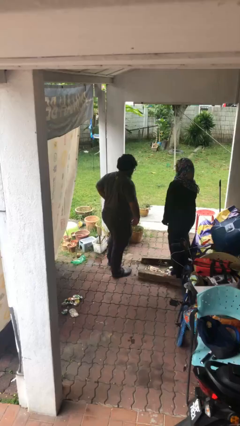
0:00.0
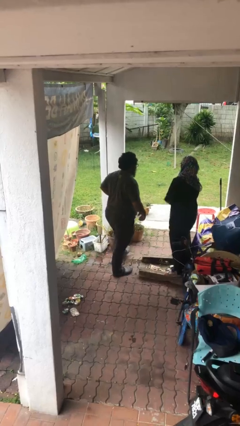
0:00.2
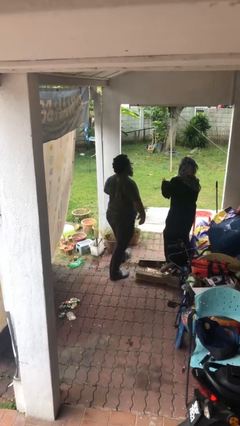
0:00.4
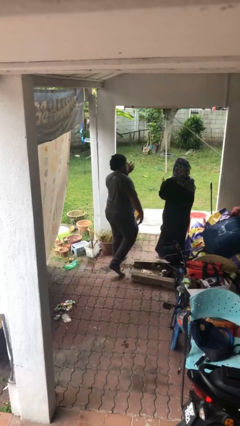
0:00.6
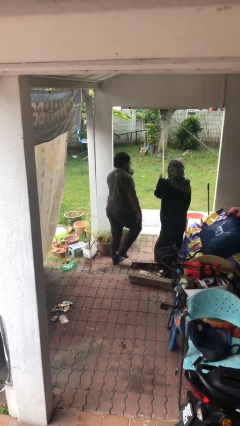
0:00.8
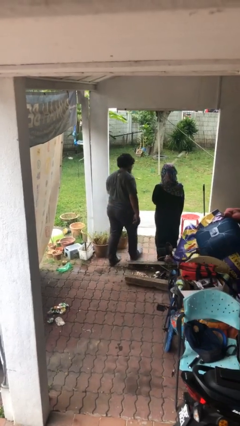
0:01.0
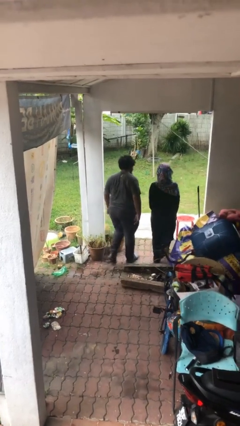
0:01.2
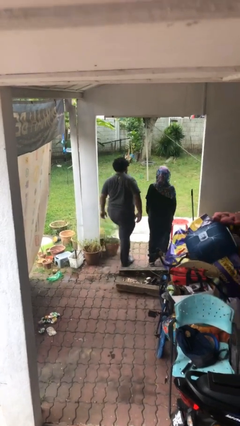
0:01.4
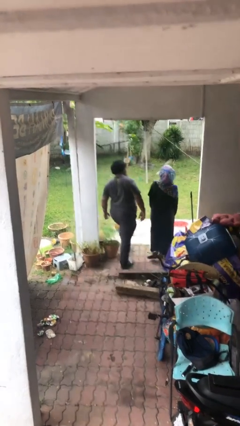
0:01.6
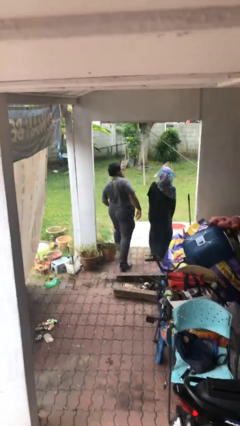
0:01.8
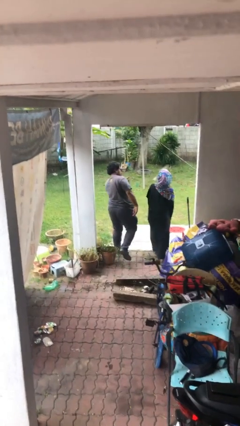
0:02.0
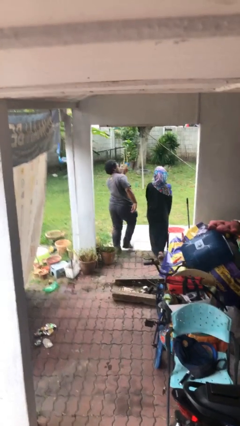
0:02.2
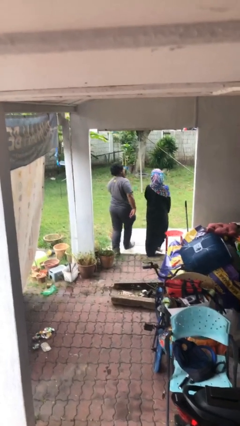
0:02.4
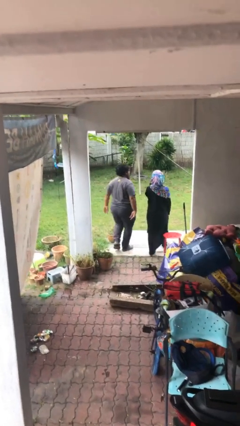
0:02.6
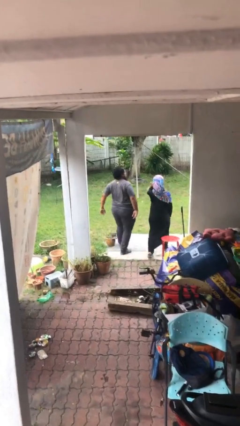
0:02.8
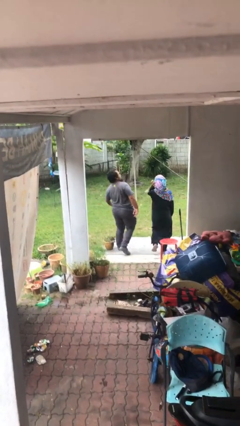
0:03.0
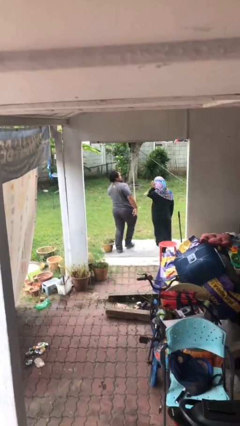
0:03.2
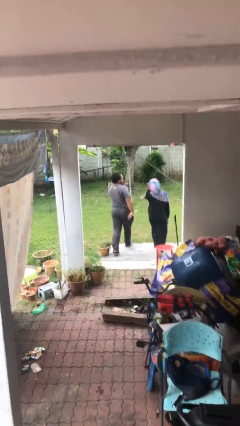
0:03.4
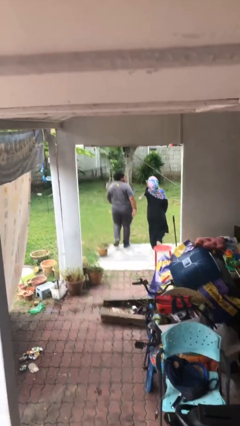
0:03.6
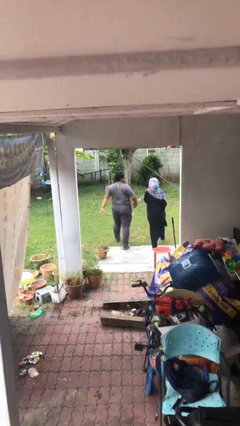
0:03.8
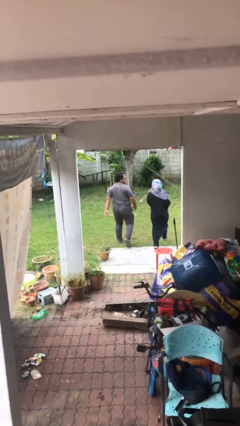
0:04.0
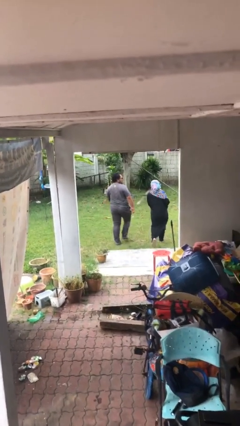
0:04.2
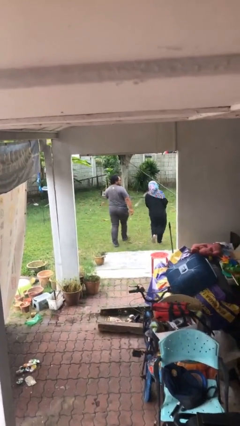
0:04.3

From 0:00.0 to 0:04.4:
person talks to person

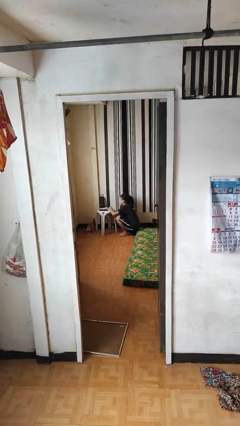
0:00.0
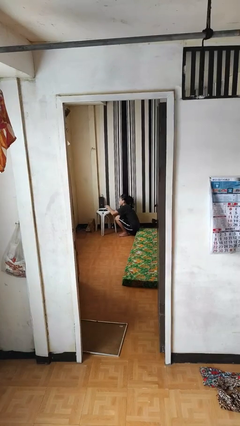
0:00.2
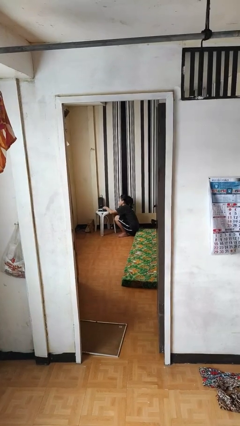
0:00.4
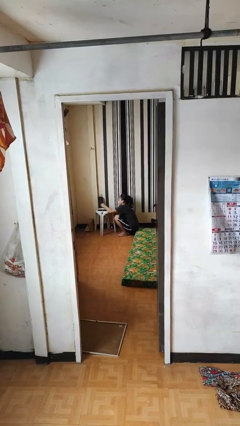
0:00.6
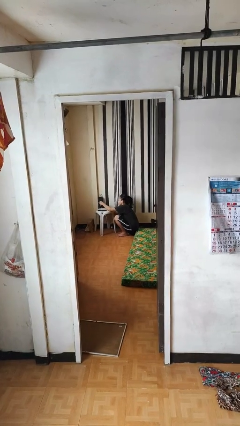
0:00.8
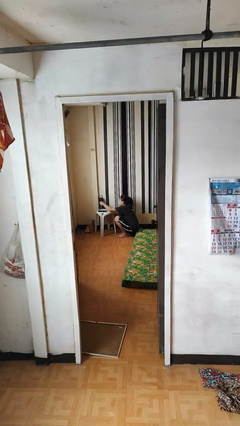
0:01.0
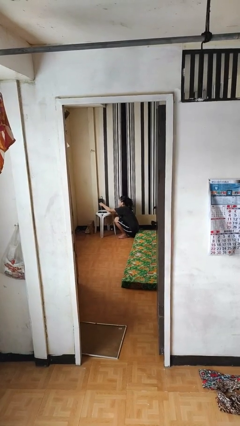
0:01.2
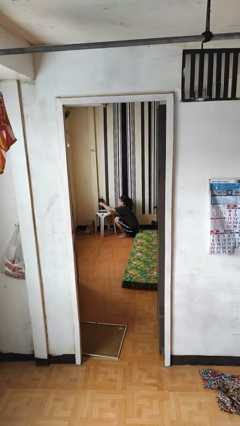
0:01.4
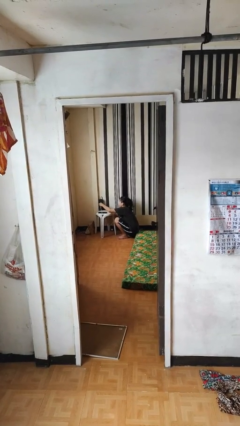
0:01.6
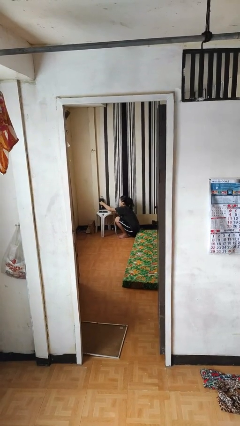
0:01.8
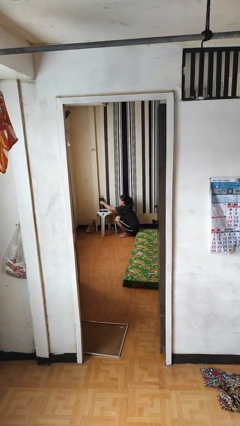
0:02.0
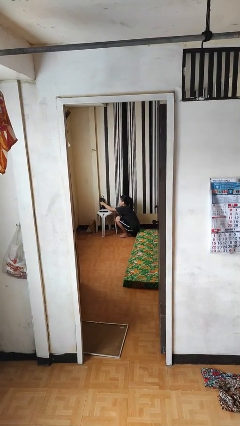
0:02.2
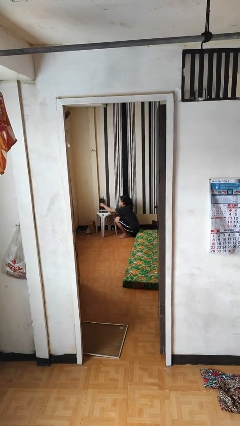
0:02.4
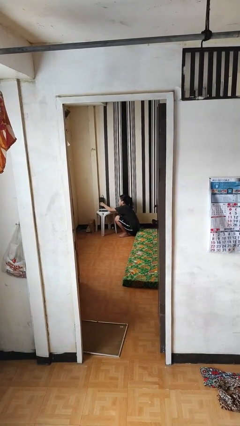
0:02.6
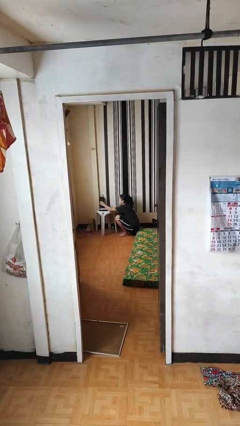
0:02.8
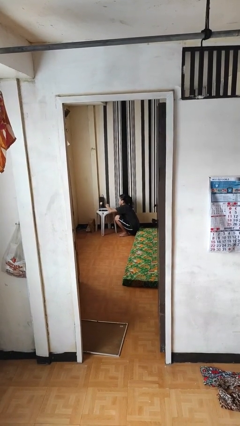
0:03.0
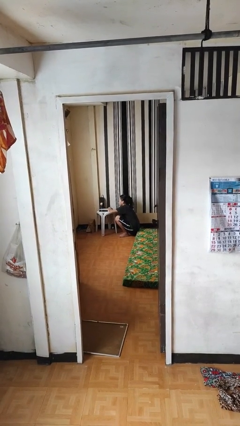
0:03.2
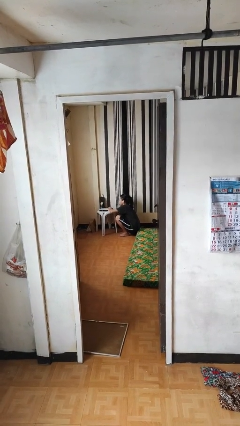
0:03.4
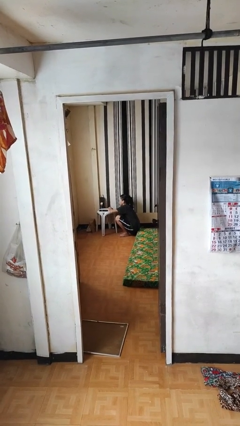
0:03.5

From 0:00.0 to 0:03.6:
person plugs into electrical socket

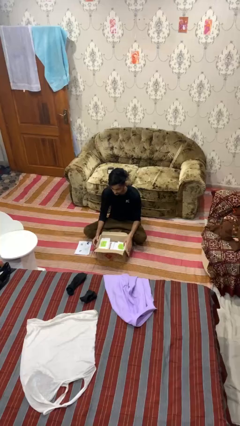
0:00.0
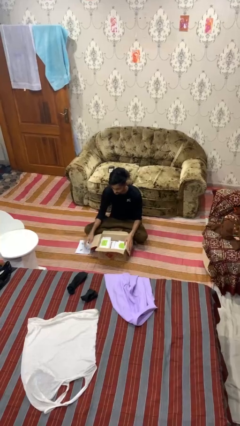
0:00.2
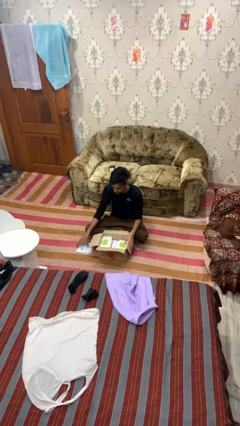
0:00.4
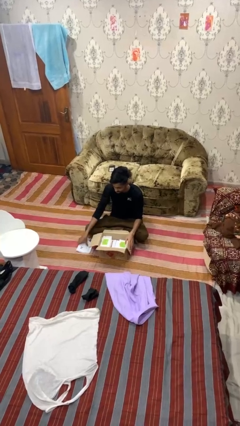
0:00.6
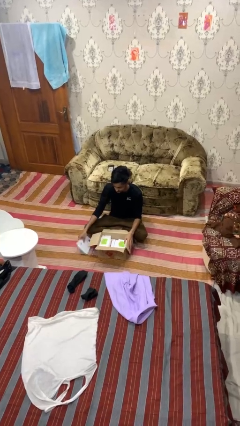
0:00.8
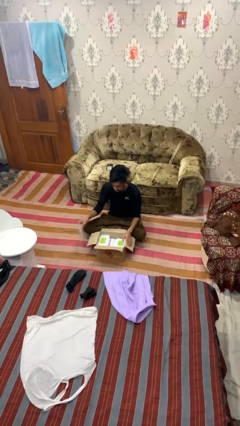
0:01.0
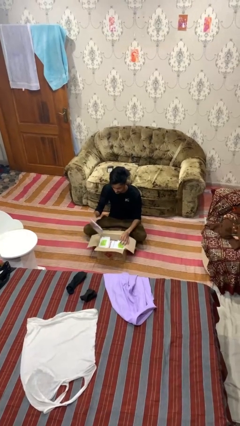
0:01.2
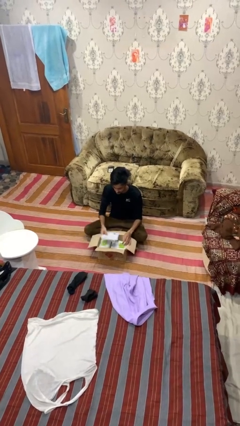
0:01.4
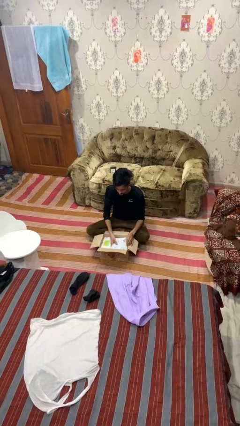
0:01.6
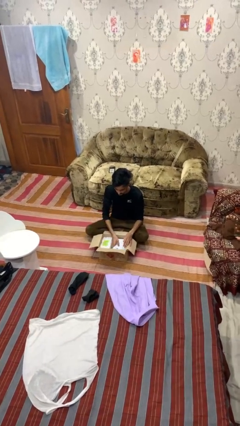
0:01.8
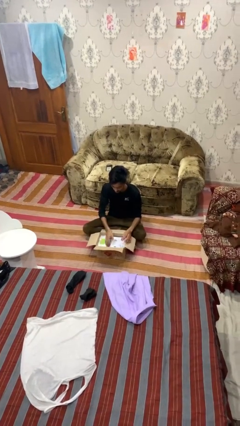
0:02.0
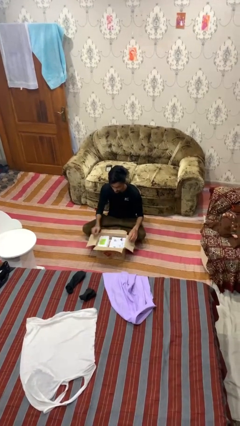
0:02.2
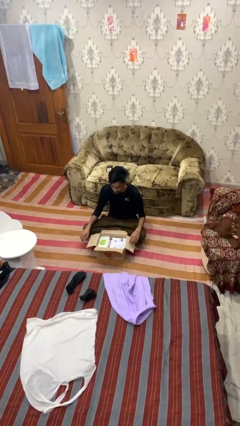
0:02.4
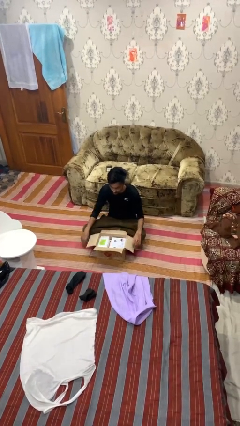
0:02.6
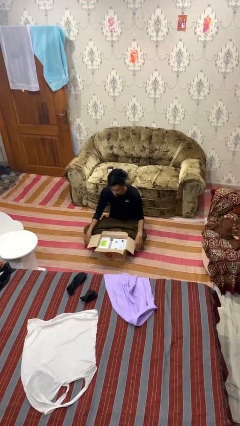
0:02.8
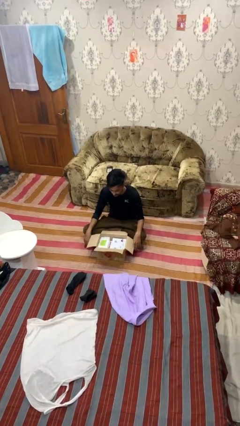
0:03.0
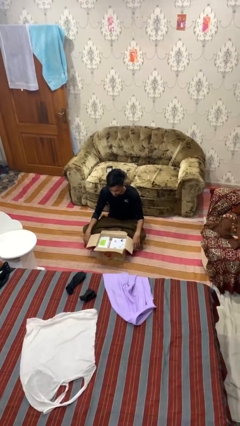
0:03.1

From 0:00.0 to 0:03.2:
person puts object into box

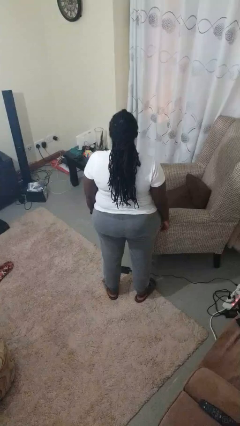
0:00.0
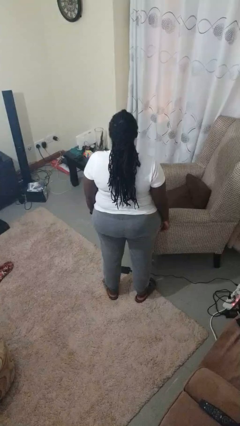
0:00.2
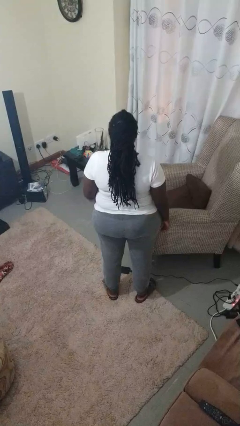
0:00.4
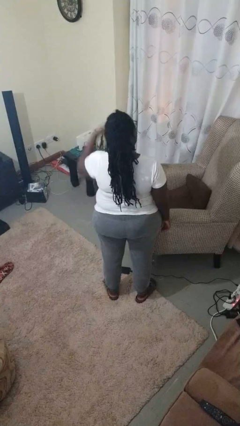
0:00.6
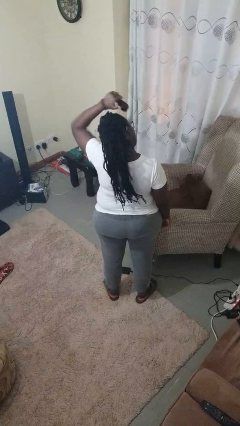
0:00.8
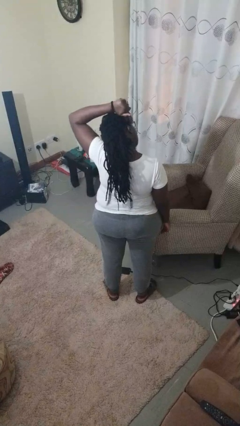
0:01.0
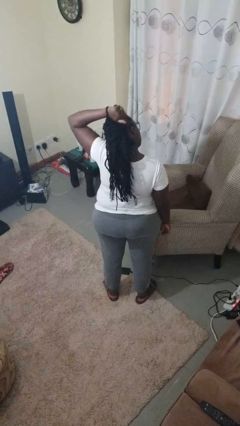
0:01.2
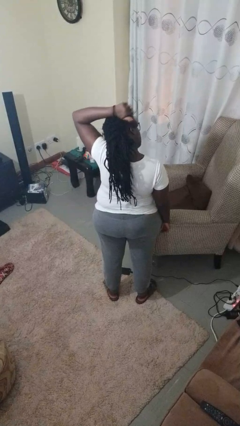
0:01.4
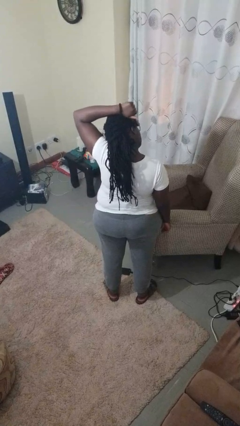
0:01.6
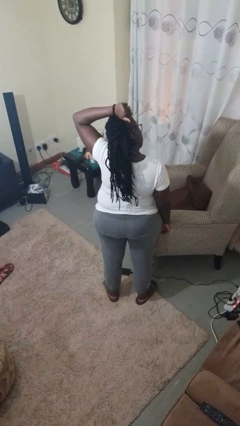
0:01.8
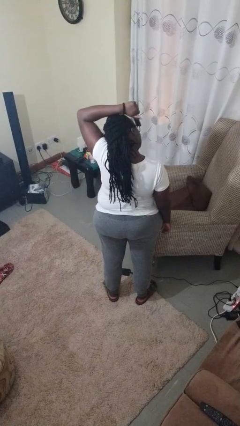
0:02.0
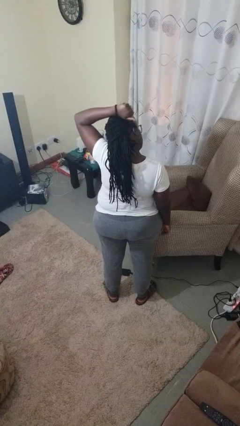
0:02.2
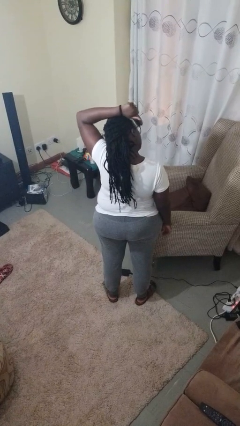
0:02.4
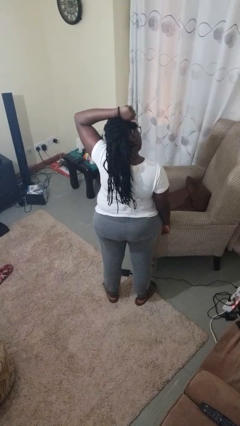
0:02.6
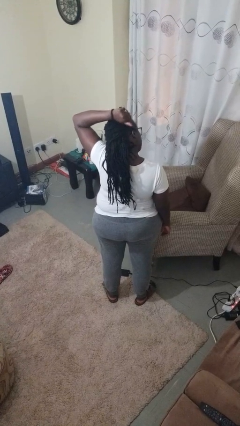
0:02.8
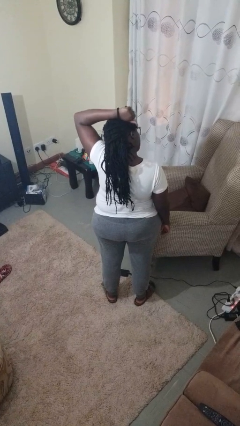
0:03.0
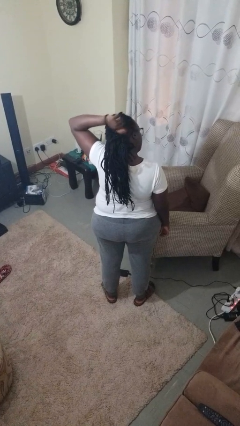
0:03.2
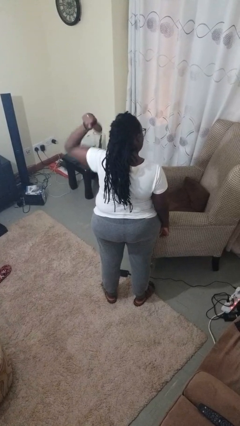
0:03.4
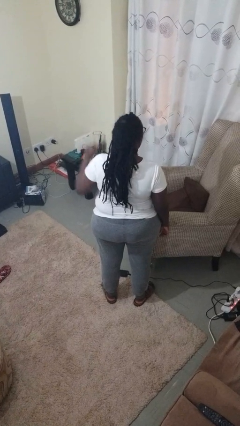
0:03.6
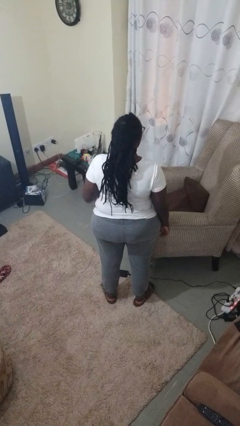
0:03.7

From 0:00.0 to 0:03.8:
person brushes hair

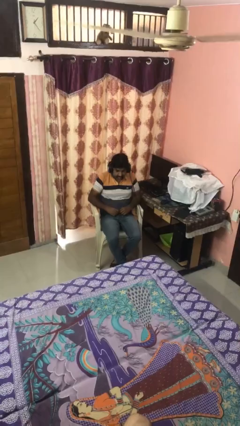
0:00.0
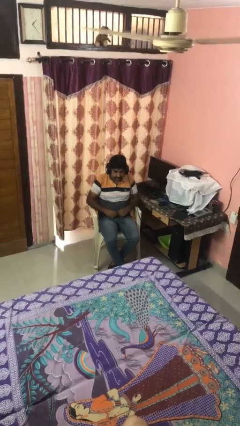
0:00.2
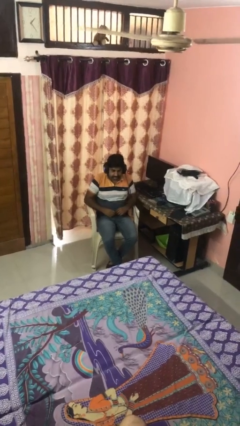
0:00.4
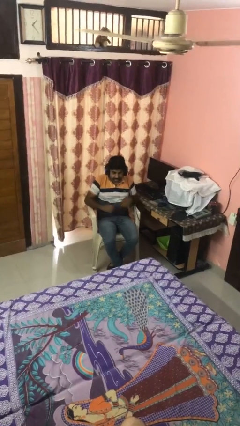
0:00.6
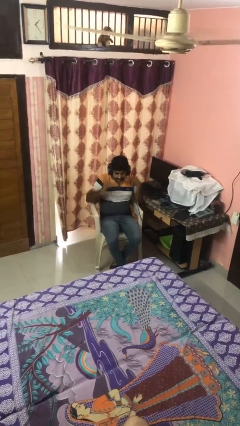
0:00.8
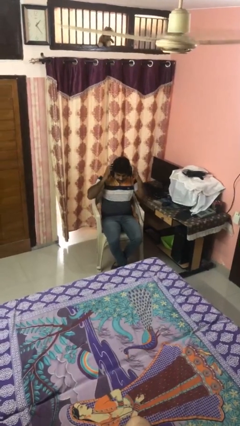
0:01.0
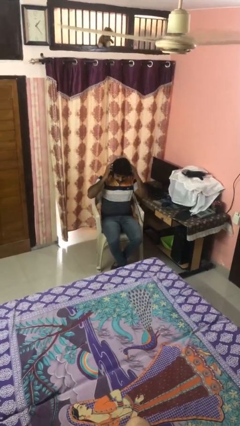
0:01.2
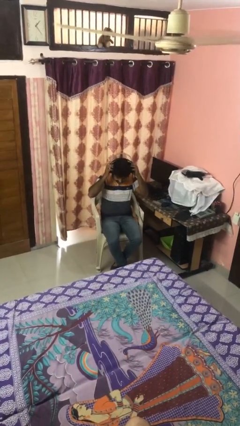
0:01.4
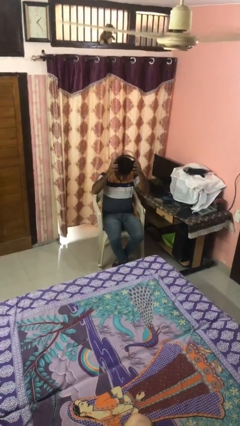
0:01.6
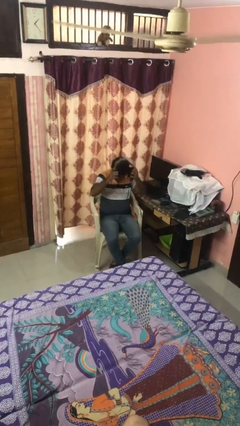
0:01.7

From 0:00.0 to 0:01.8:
person takes off headphones

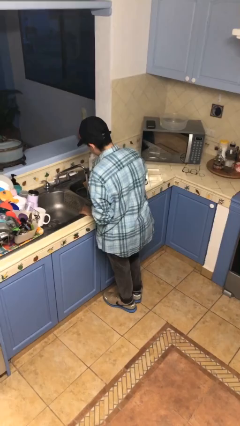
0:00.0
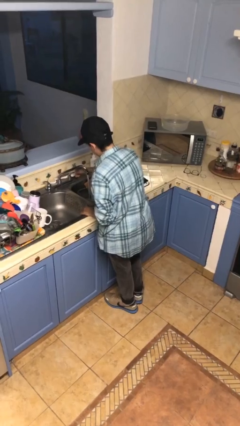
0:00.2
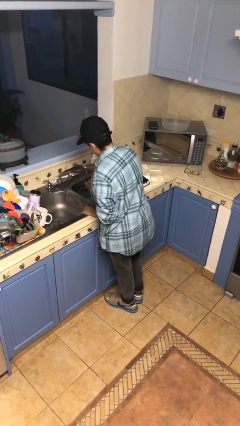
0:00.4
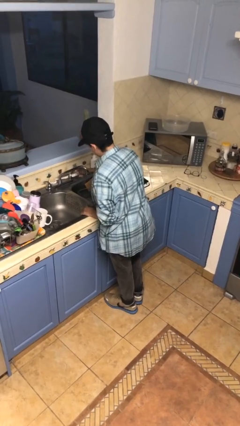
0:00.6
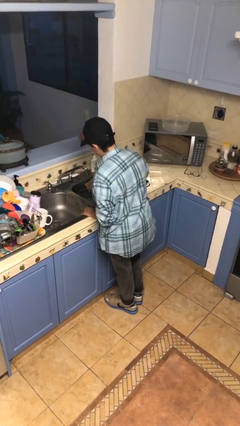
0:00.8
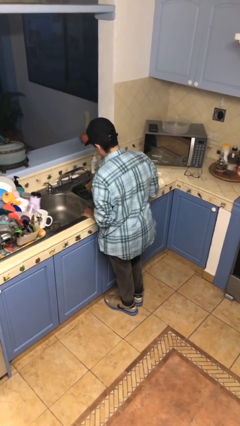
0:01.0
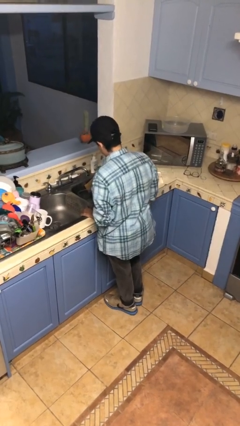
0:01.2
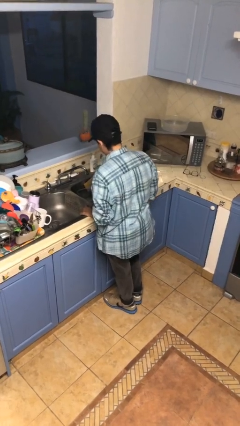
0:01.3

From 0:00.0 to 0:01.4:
person turns off faucet
